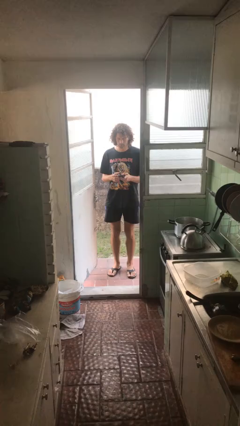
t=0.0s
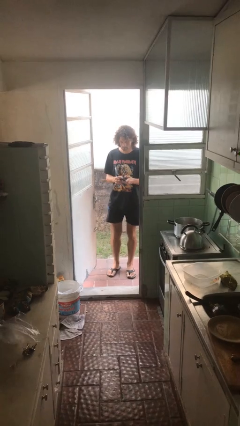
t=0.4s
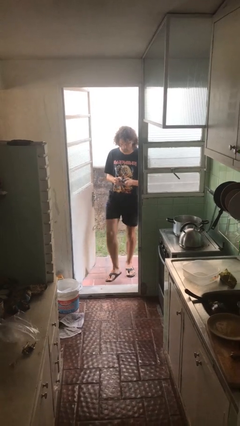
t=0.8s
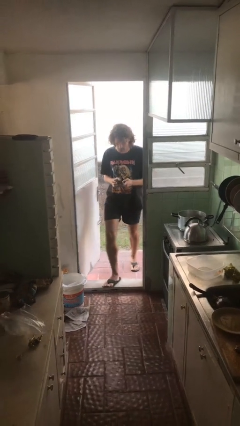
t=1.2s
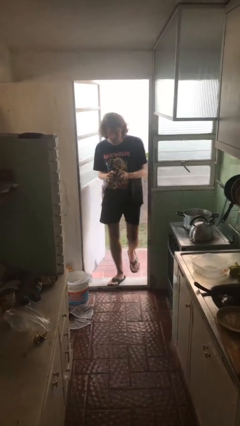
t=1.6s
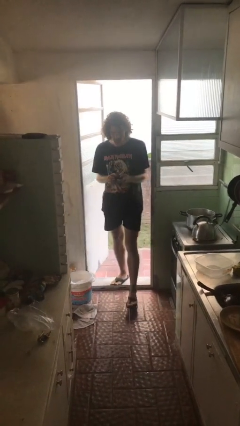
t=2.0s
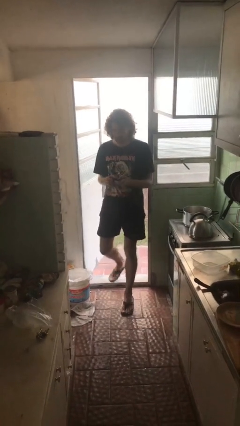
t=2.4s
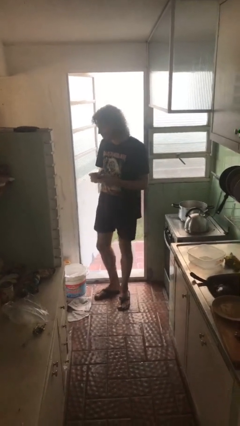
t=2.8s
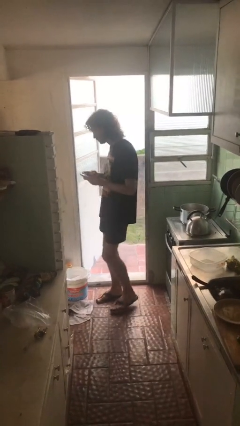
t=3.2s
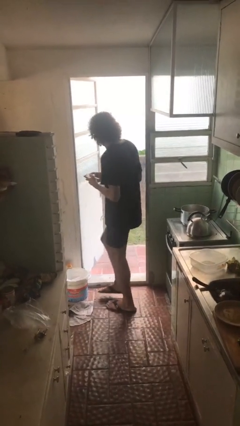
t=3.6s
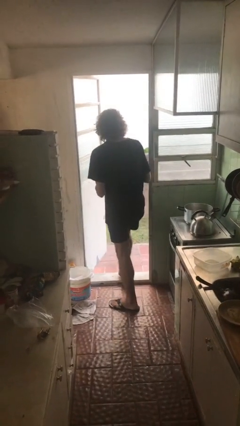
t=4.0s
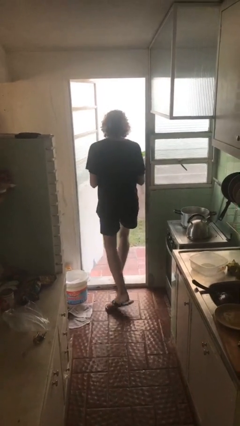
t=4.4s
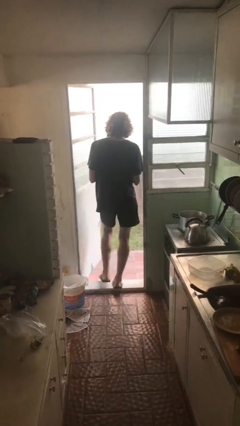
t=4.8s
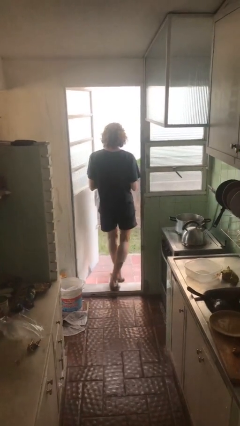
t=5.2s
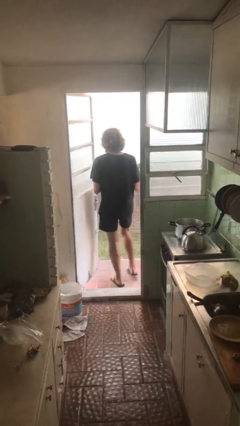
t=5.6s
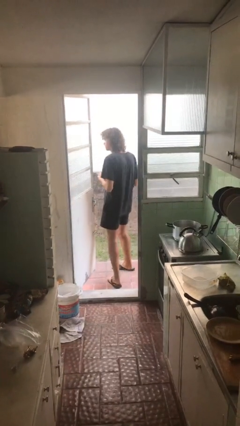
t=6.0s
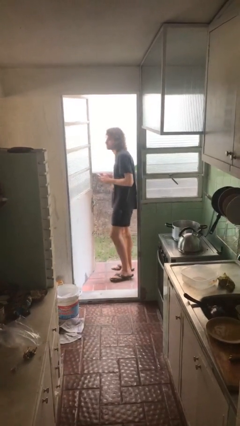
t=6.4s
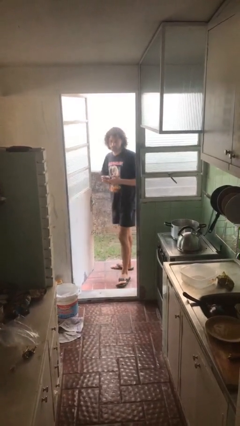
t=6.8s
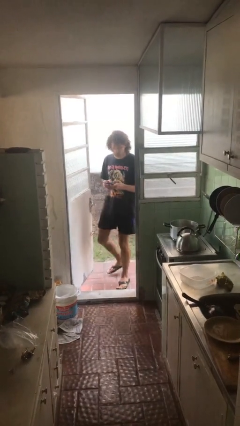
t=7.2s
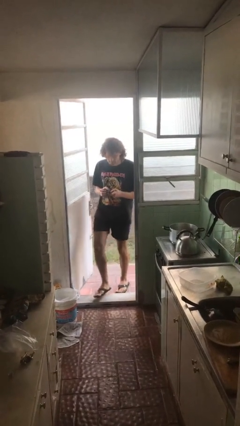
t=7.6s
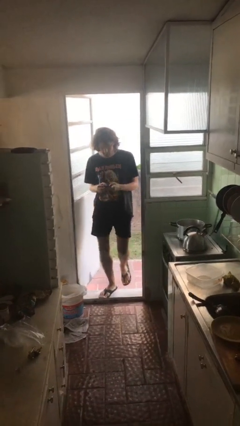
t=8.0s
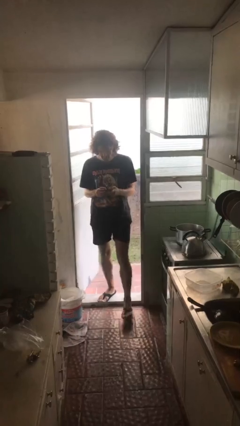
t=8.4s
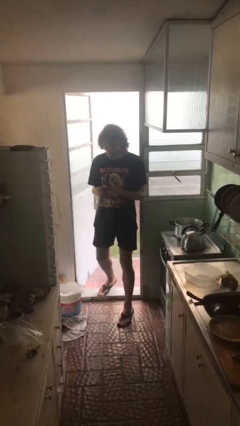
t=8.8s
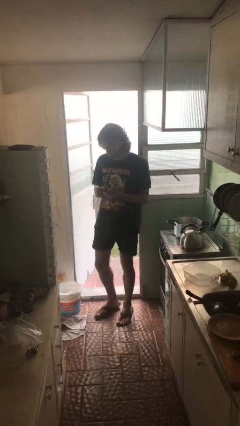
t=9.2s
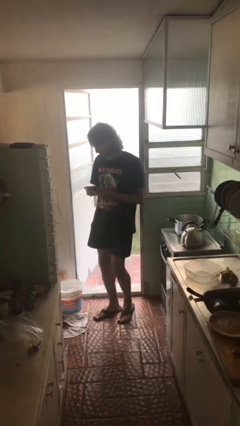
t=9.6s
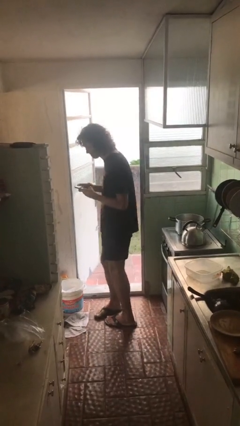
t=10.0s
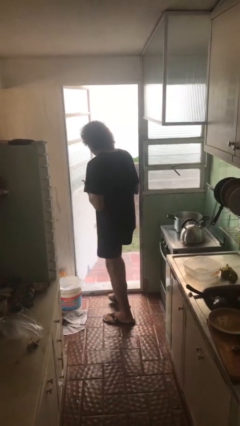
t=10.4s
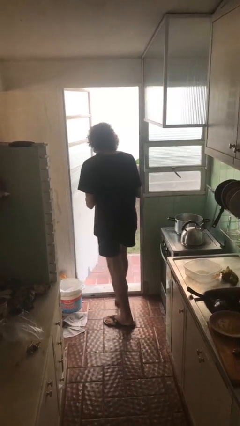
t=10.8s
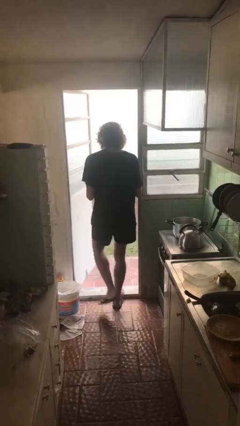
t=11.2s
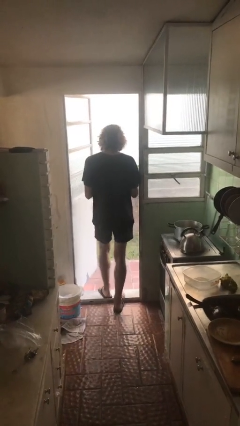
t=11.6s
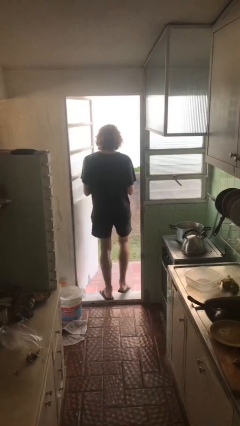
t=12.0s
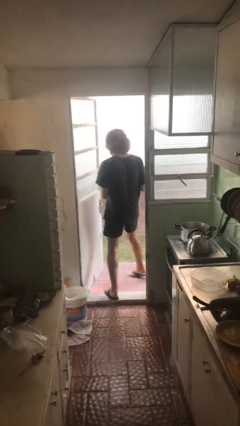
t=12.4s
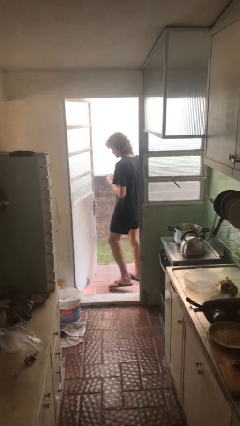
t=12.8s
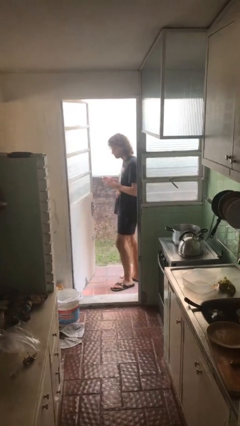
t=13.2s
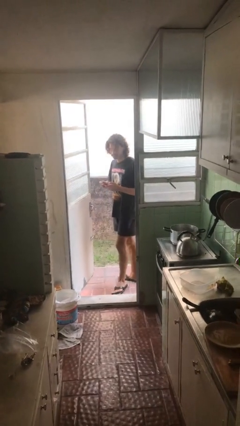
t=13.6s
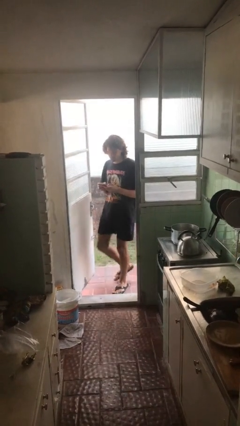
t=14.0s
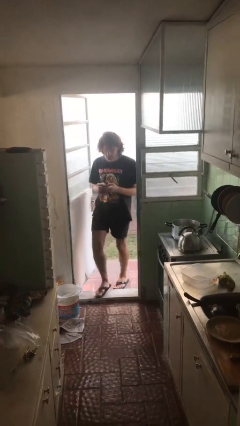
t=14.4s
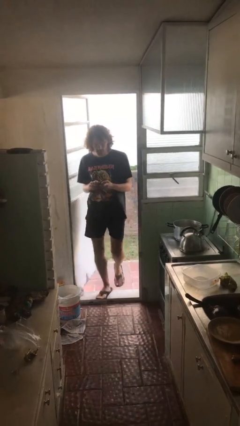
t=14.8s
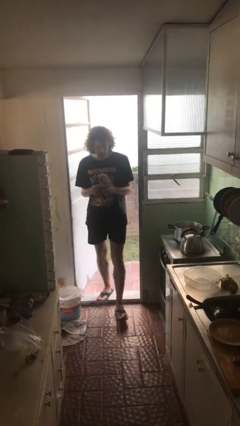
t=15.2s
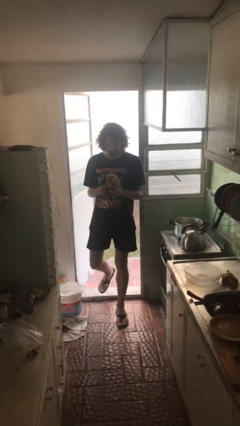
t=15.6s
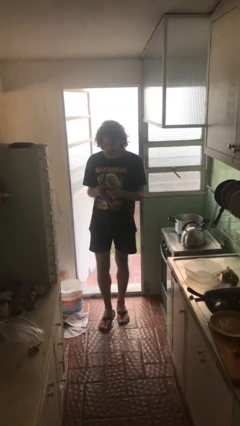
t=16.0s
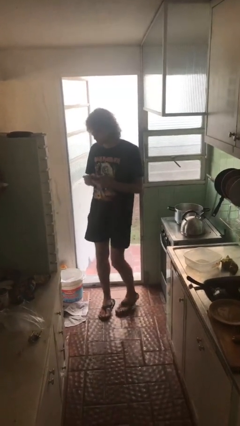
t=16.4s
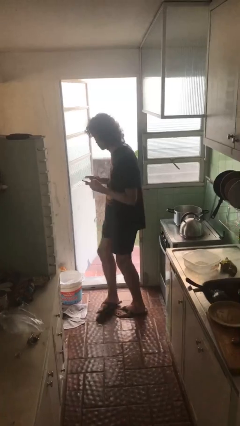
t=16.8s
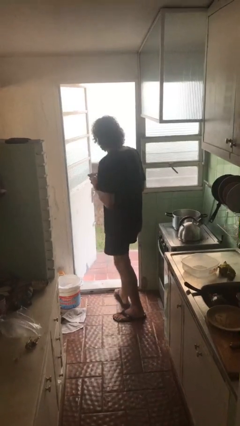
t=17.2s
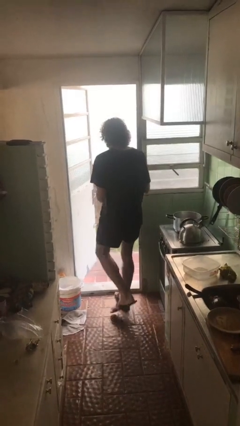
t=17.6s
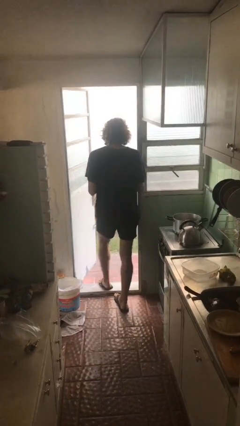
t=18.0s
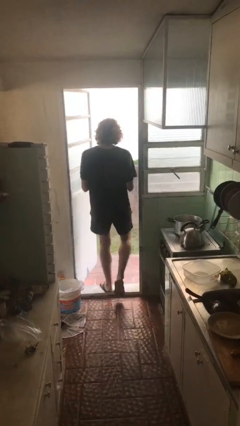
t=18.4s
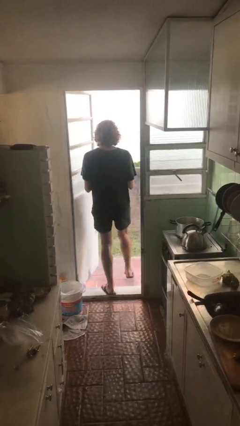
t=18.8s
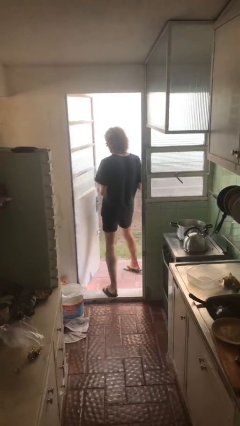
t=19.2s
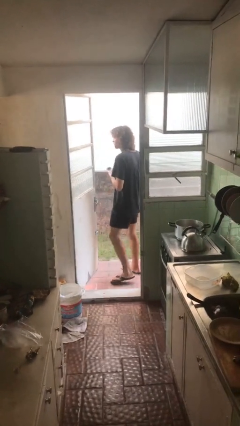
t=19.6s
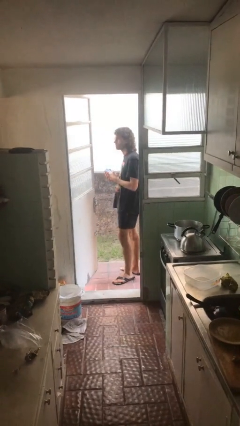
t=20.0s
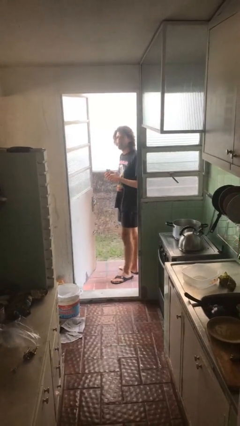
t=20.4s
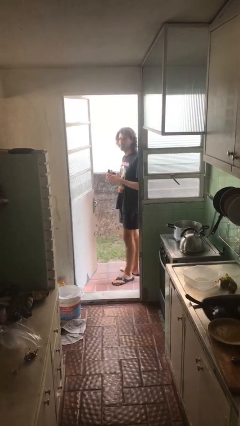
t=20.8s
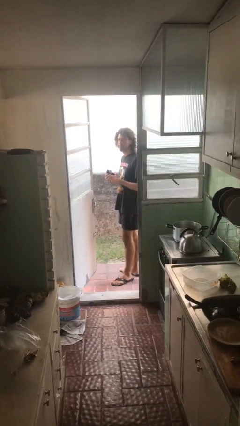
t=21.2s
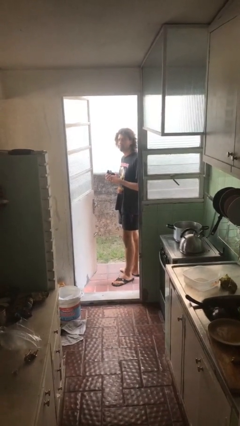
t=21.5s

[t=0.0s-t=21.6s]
person texts on phone

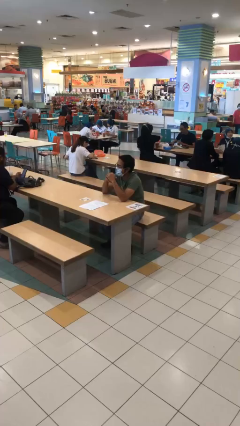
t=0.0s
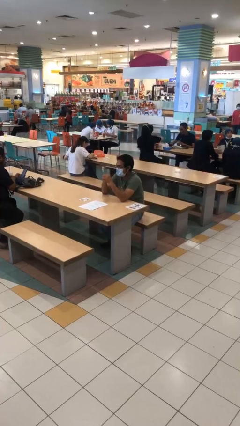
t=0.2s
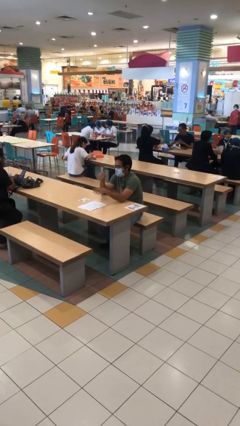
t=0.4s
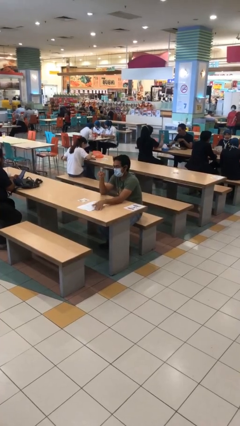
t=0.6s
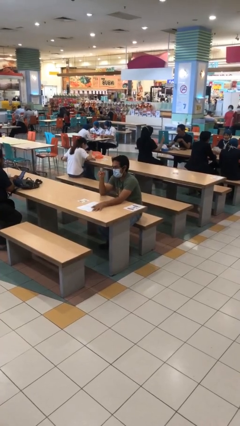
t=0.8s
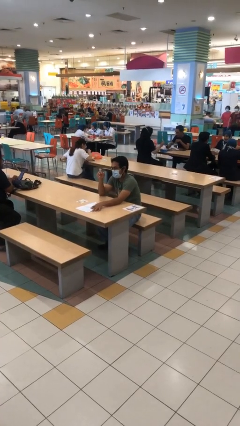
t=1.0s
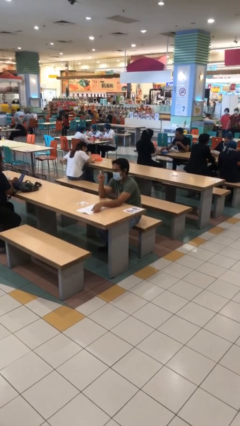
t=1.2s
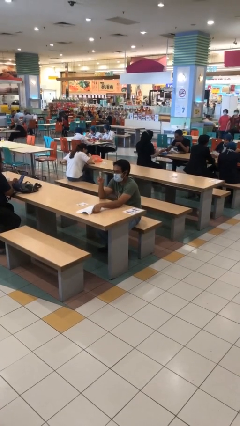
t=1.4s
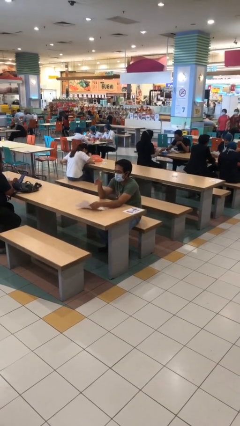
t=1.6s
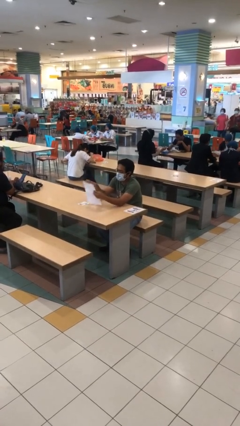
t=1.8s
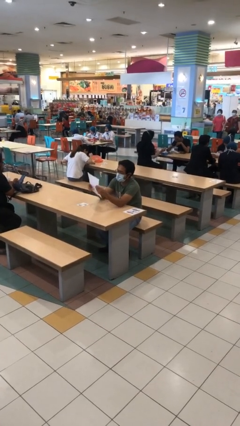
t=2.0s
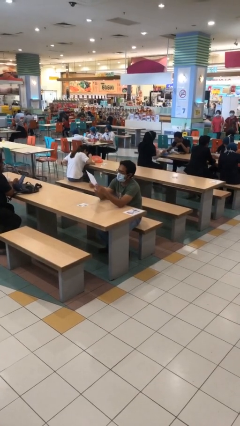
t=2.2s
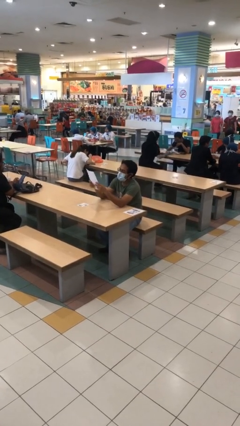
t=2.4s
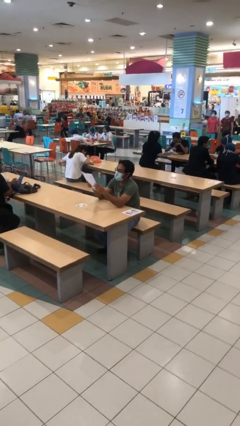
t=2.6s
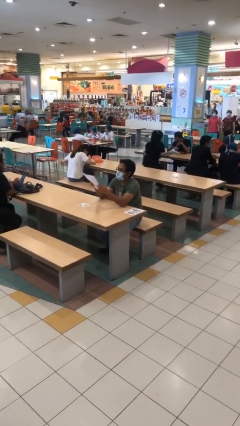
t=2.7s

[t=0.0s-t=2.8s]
person picks up object from table

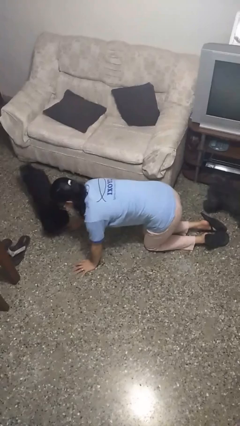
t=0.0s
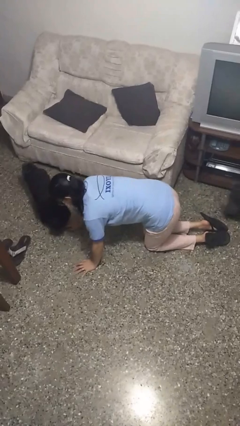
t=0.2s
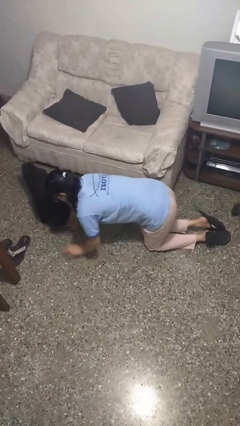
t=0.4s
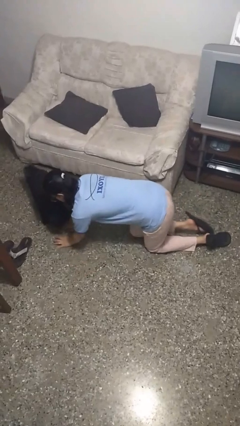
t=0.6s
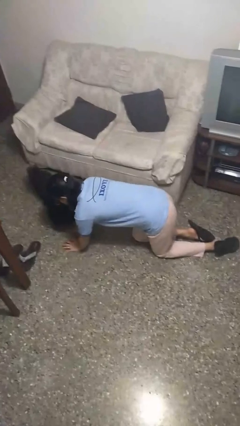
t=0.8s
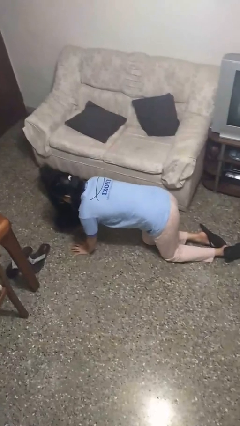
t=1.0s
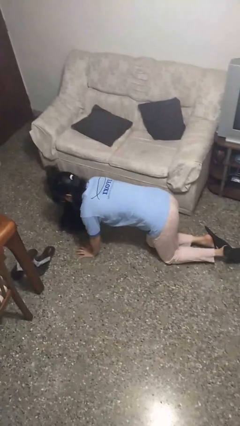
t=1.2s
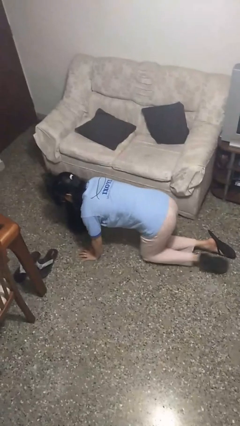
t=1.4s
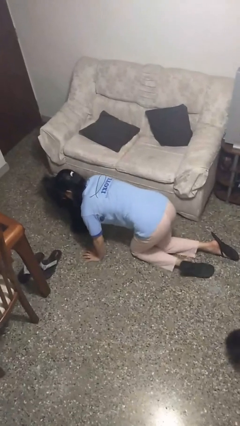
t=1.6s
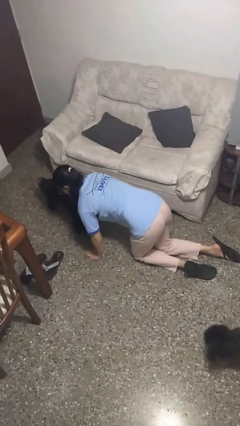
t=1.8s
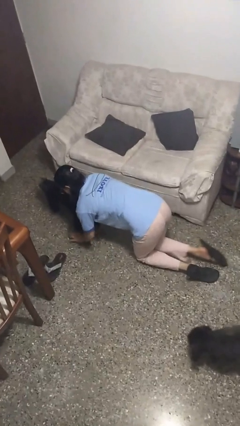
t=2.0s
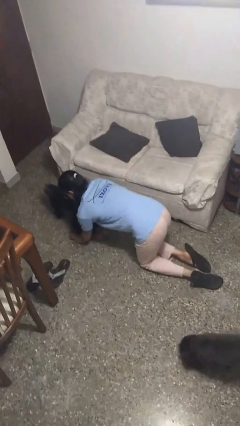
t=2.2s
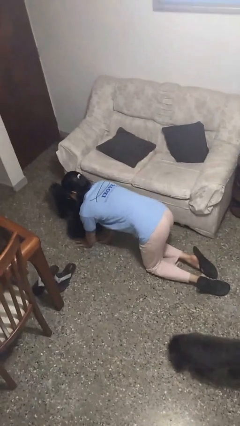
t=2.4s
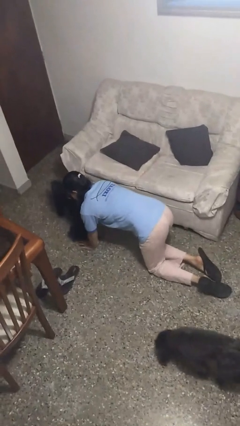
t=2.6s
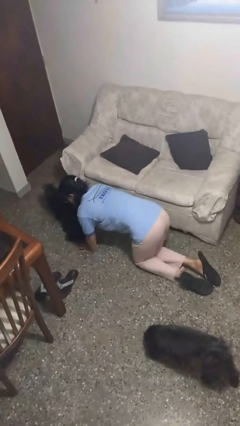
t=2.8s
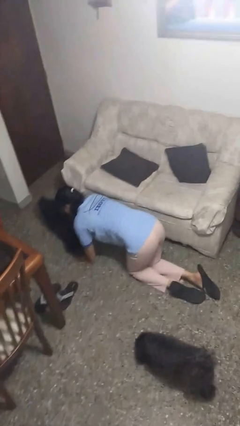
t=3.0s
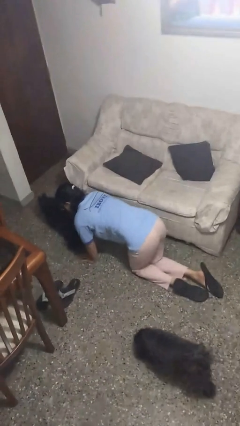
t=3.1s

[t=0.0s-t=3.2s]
person crawls

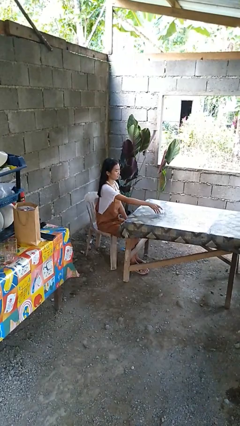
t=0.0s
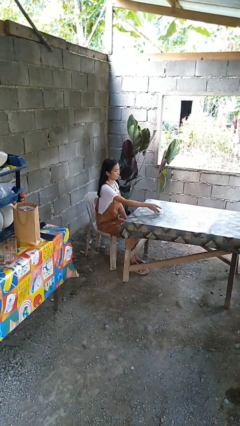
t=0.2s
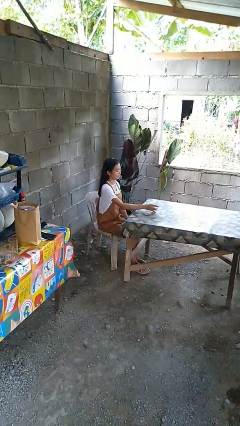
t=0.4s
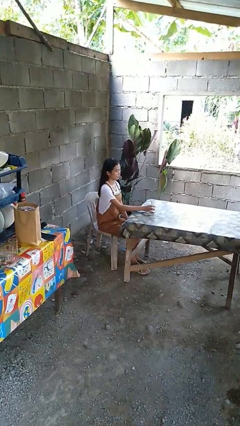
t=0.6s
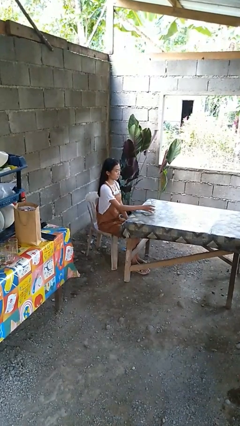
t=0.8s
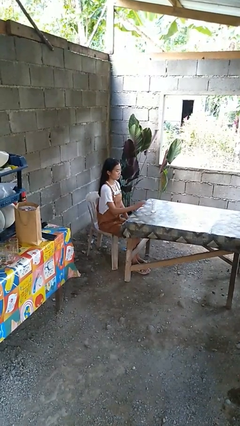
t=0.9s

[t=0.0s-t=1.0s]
person sets upright glass
